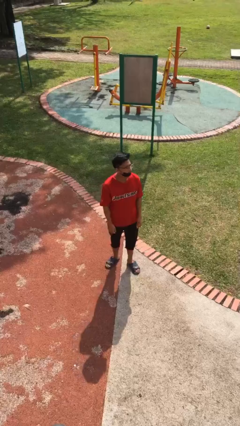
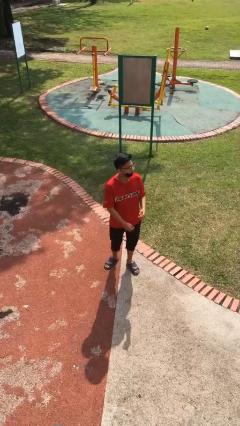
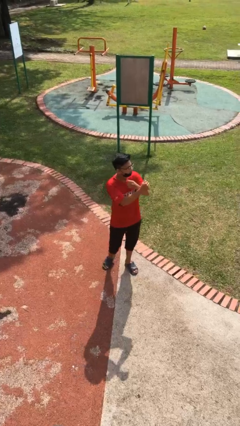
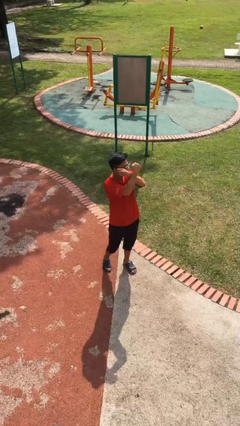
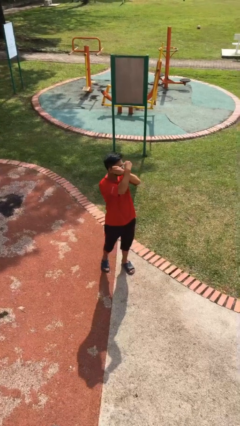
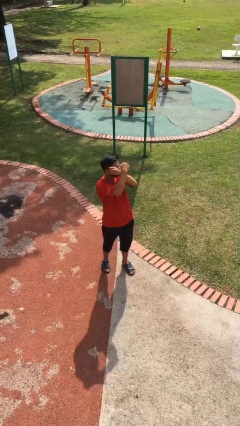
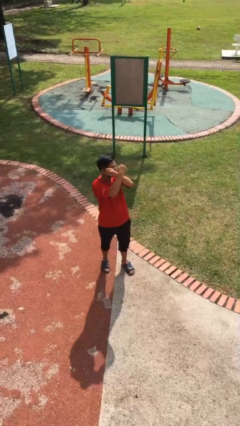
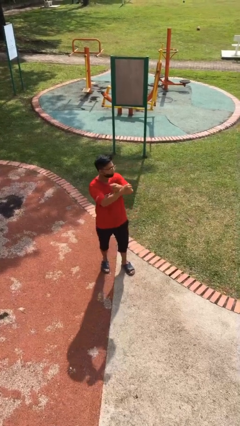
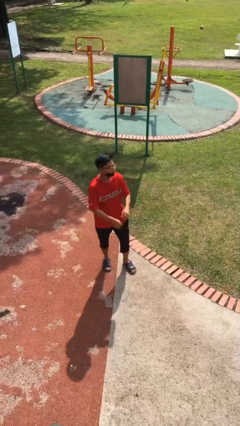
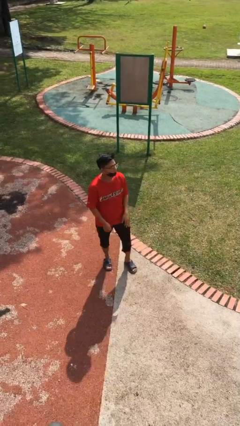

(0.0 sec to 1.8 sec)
person gestures arms x

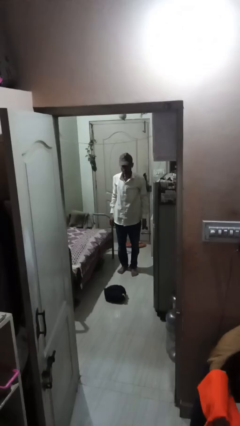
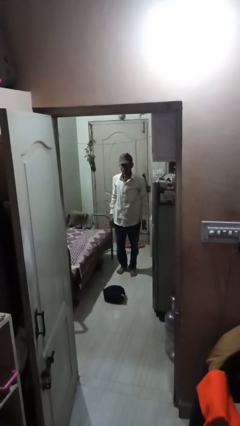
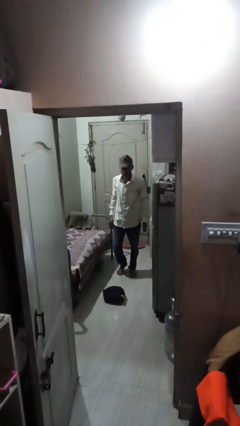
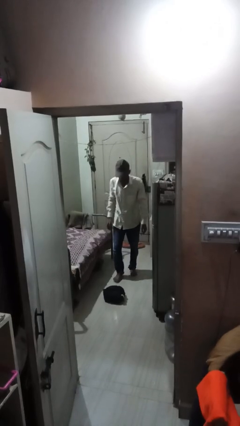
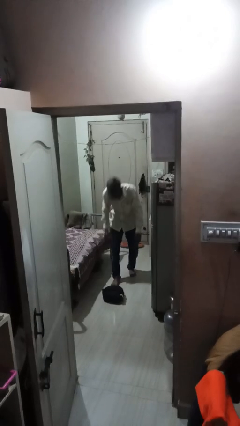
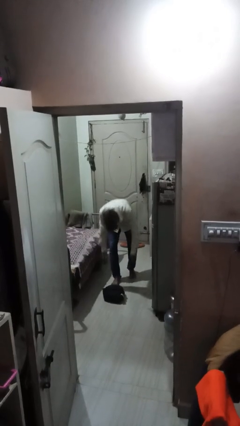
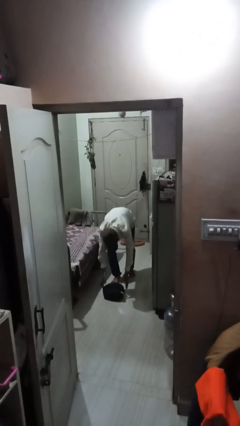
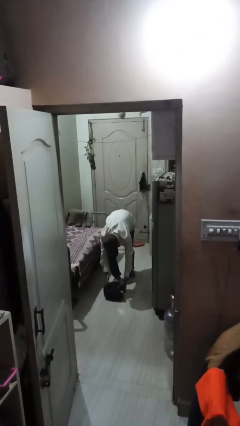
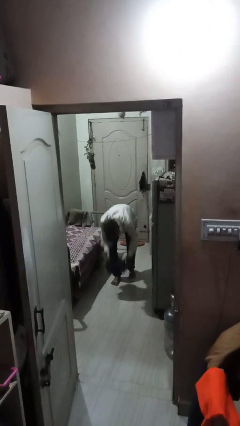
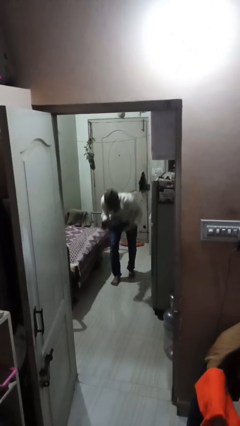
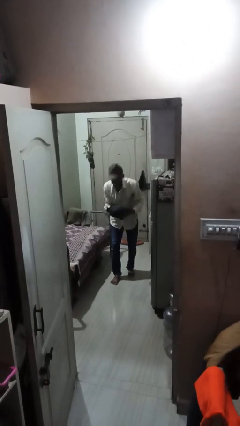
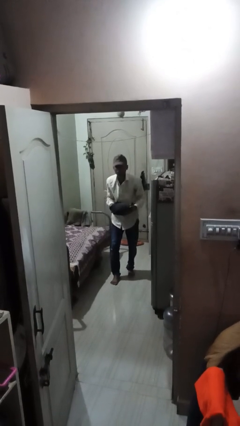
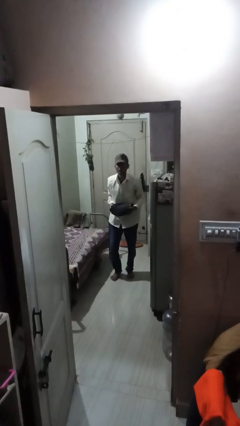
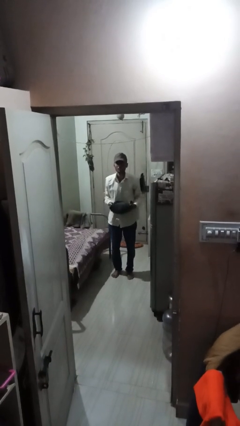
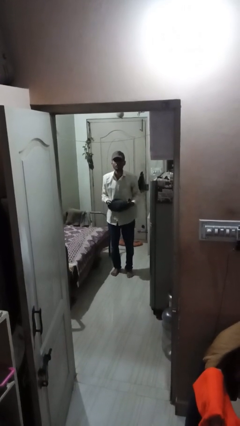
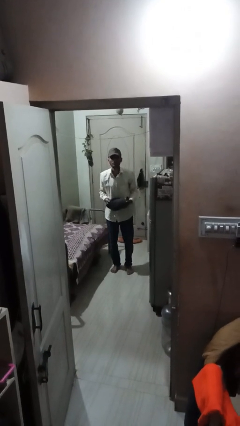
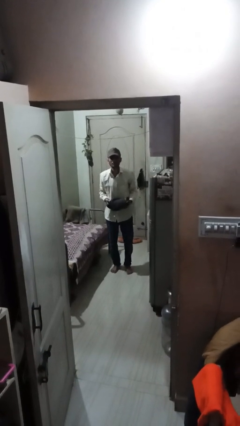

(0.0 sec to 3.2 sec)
person picks up object from floor

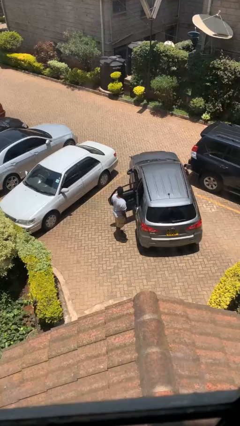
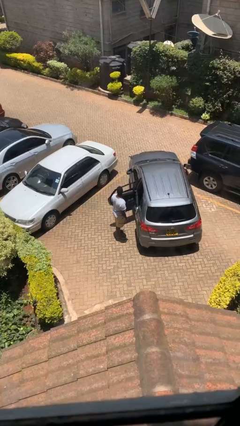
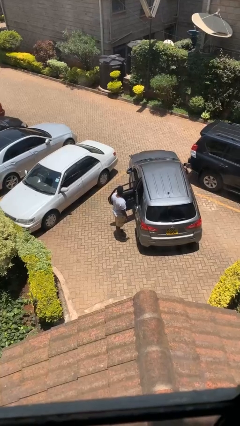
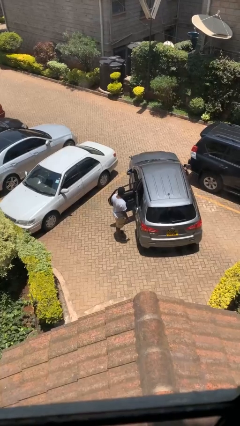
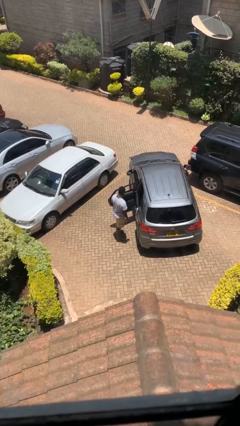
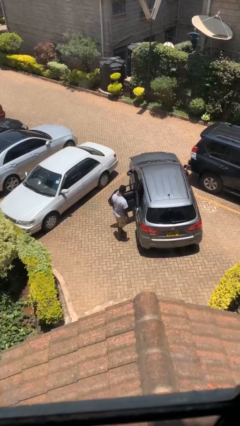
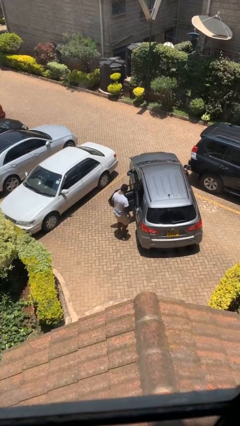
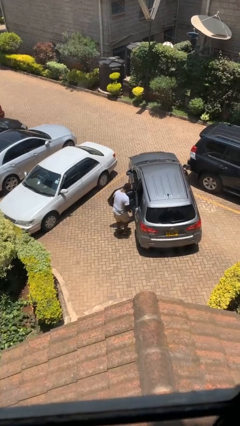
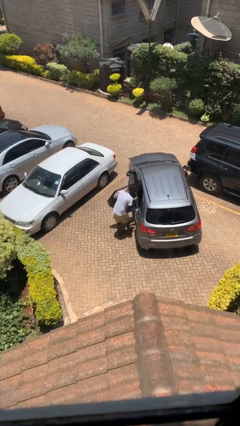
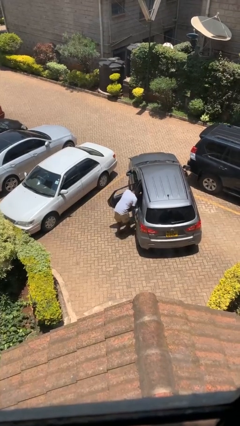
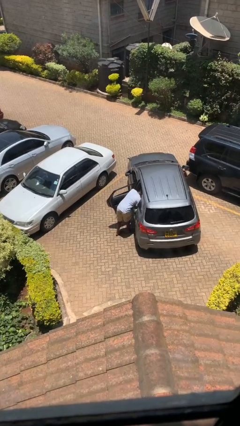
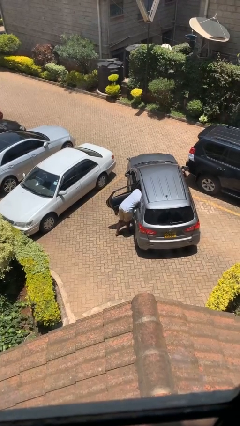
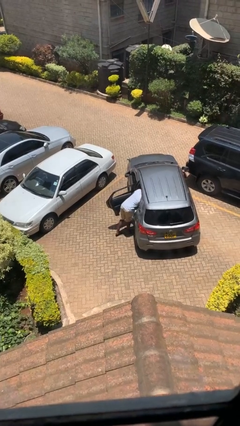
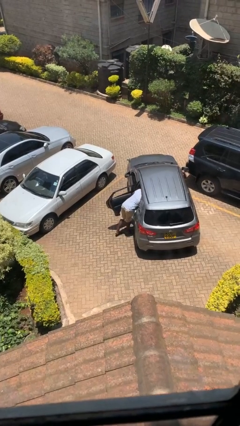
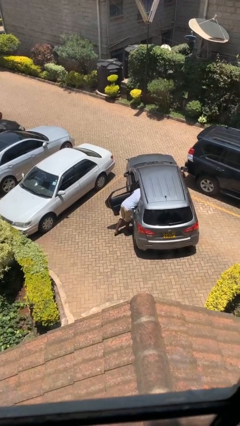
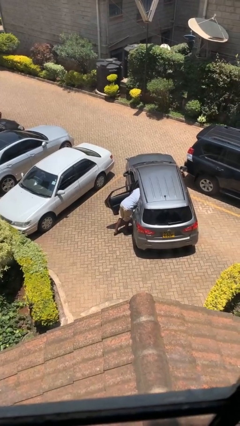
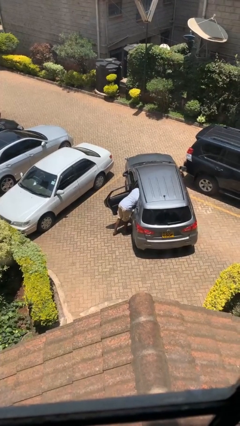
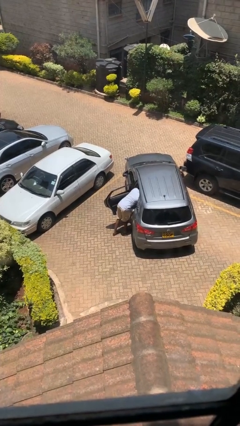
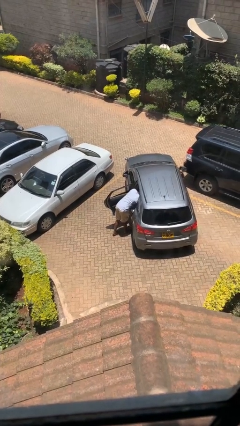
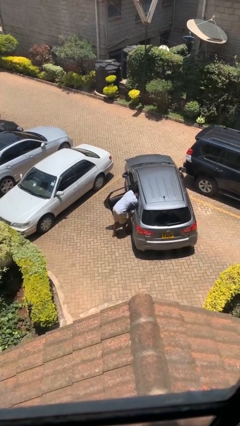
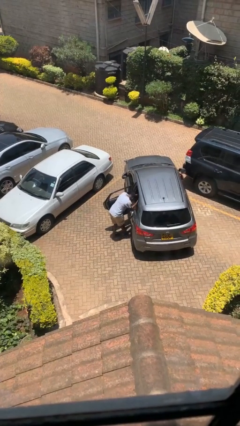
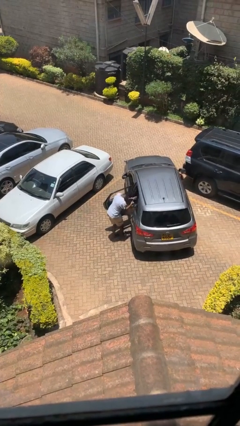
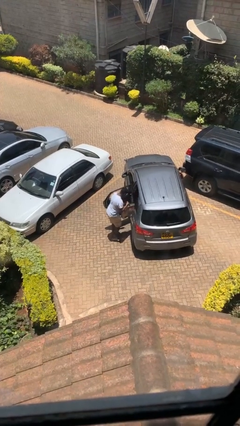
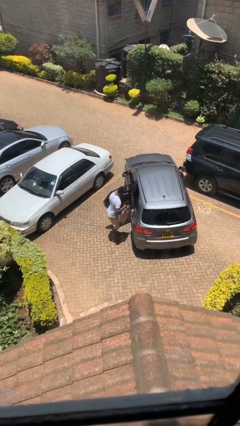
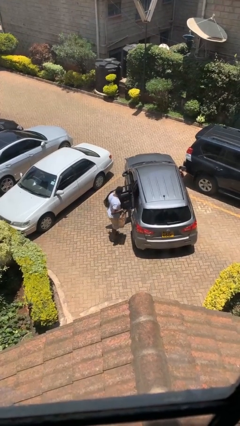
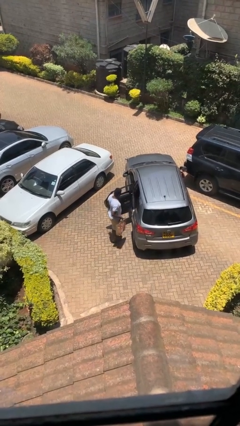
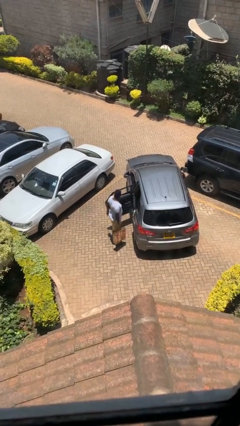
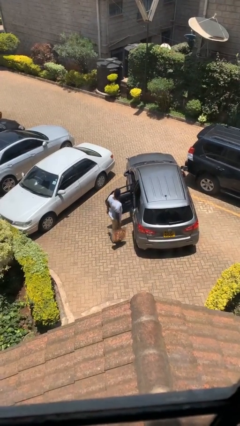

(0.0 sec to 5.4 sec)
person unloads car

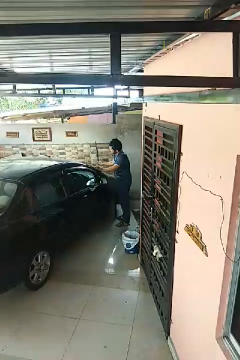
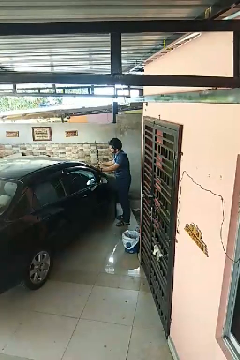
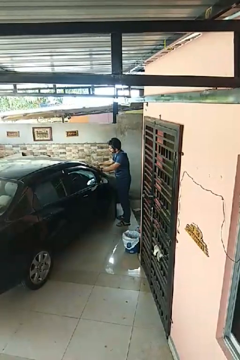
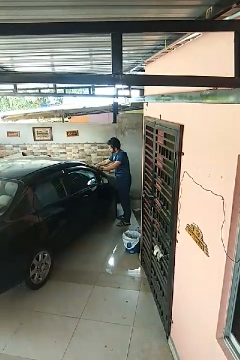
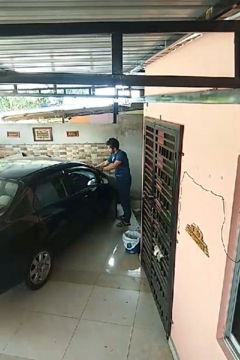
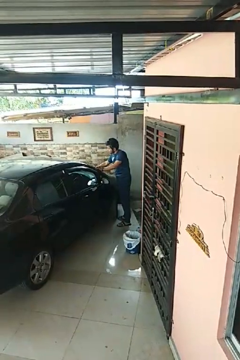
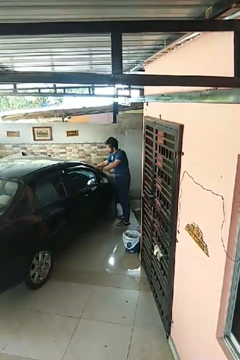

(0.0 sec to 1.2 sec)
person flips down car wipers

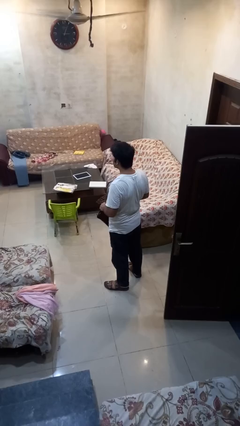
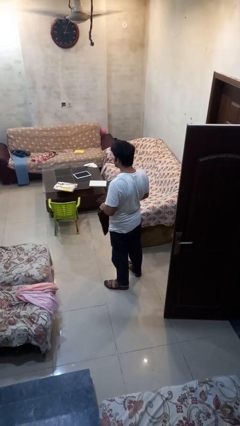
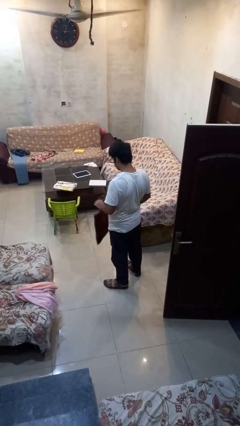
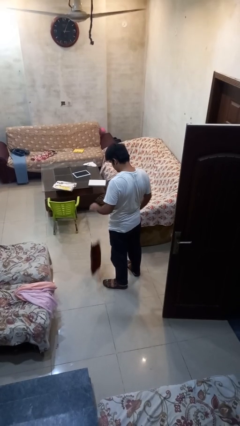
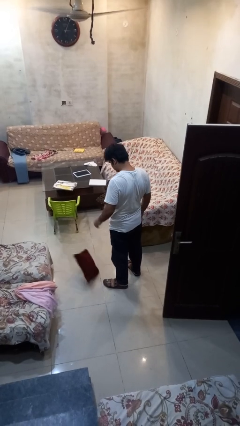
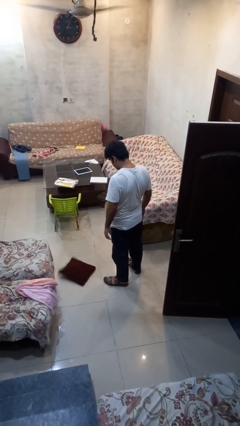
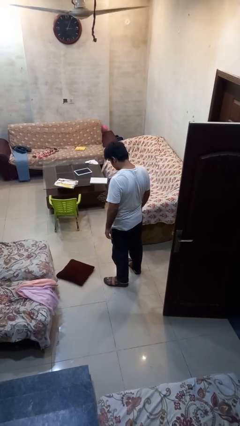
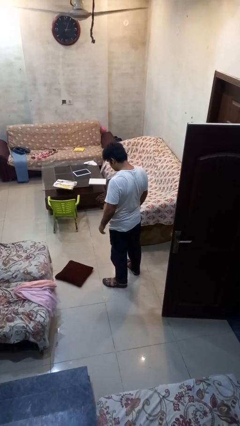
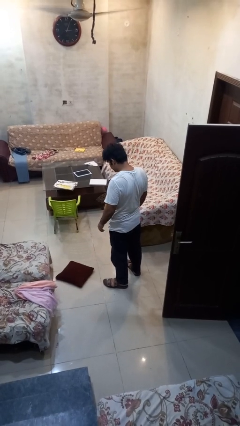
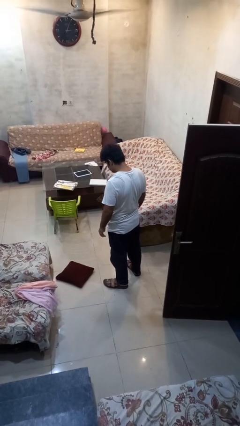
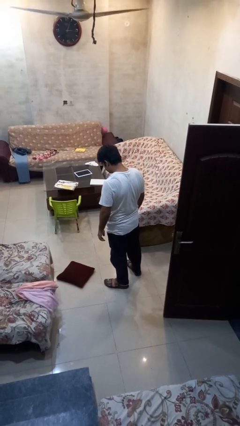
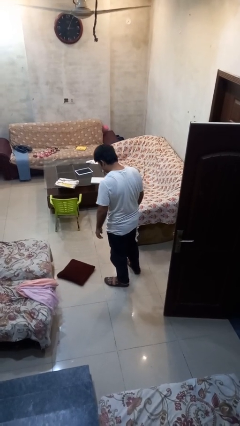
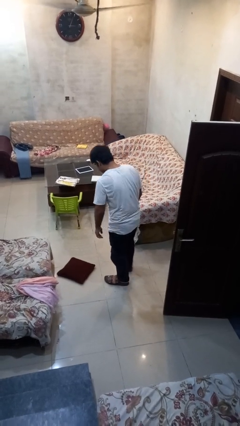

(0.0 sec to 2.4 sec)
person drops object

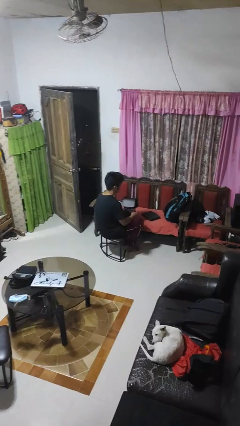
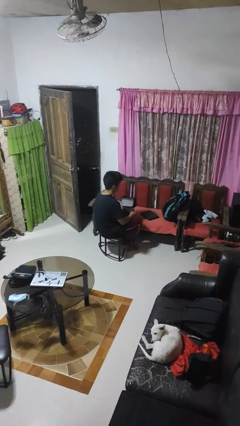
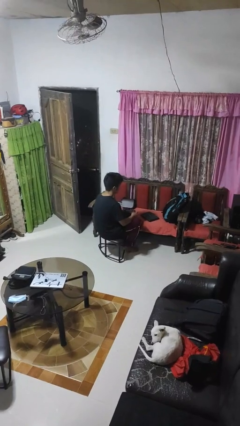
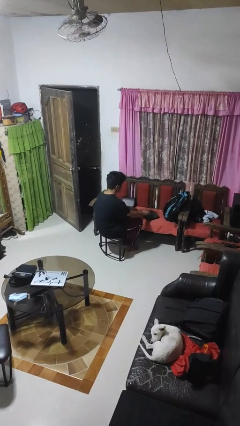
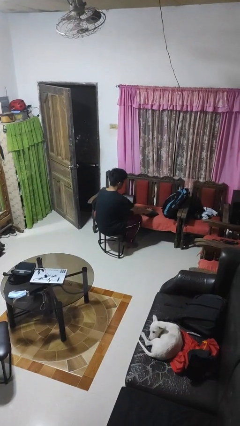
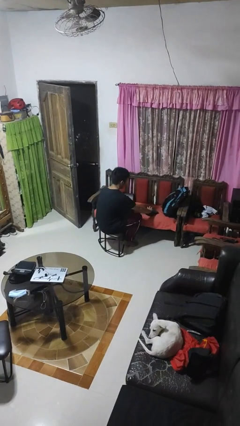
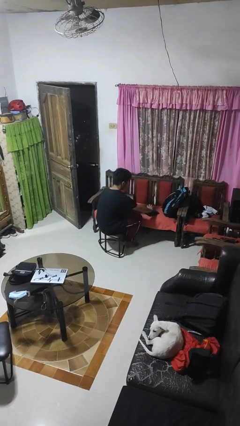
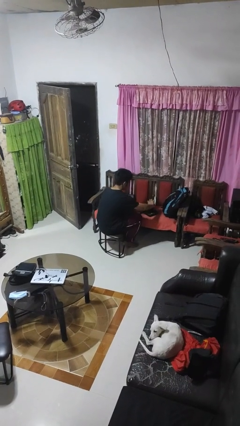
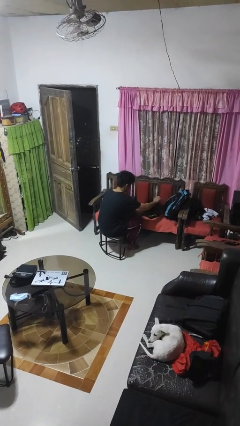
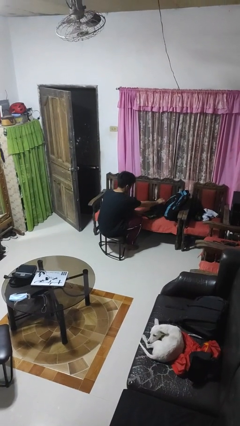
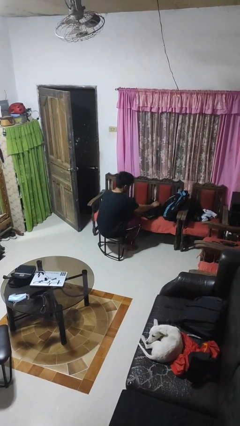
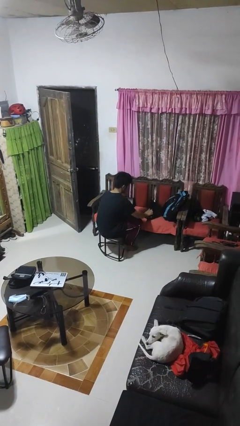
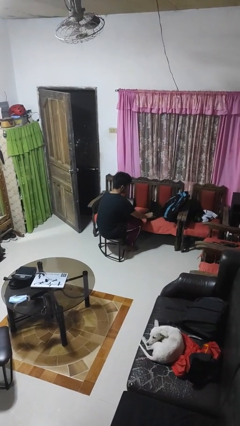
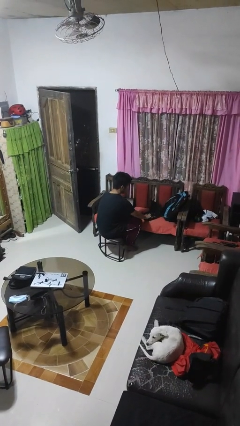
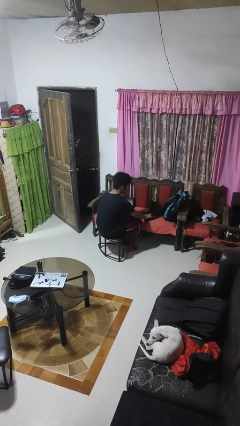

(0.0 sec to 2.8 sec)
person opens laptop

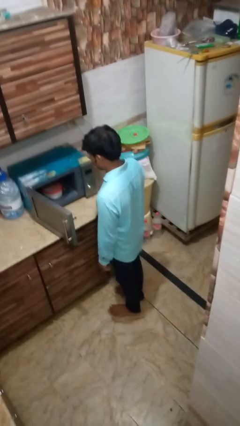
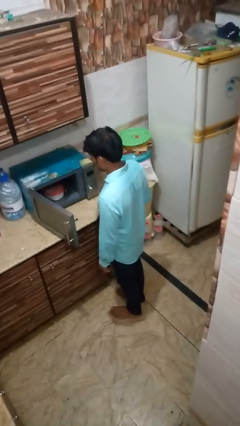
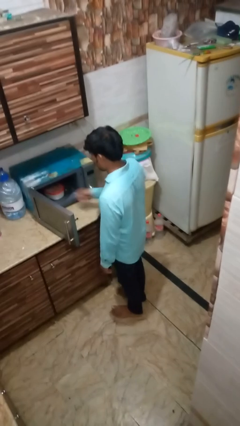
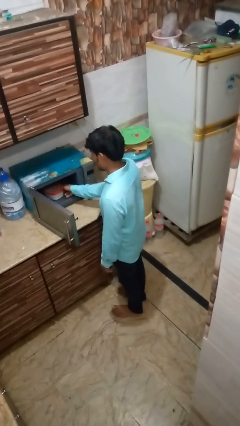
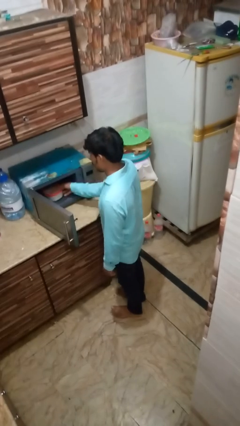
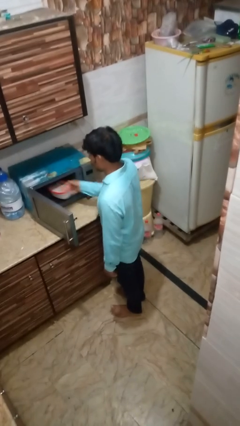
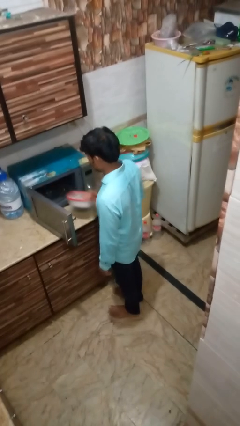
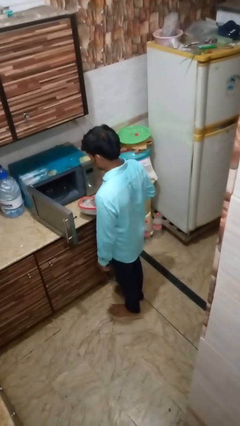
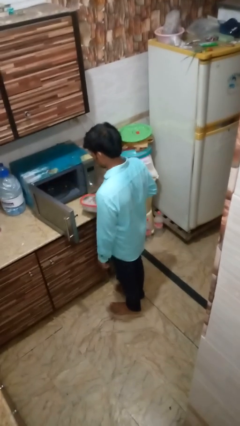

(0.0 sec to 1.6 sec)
person takes object from oven
